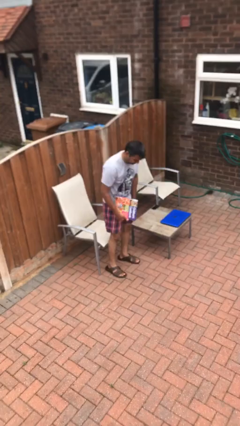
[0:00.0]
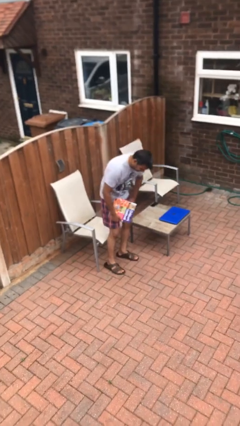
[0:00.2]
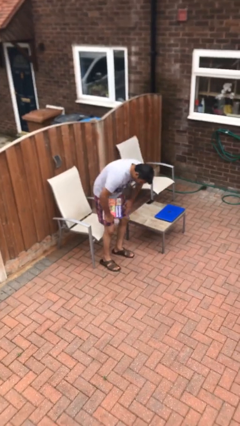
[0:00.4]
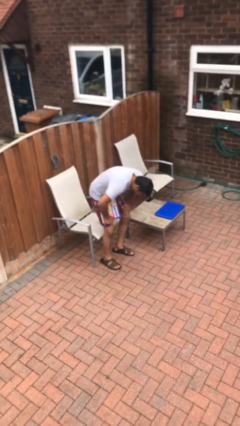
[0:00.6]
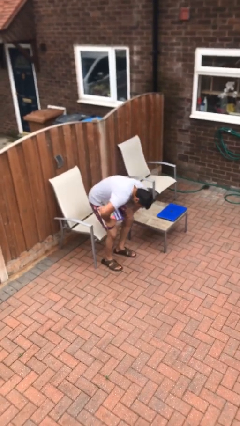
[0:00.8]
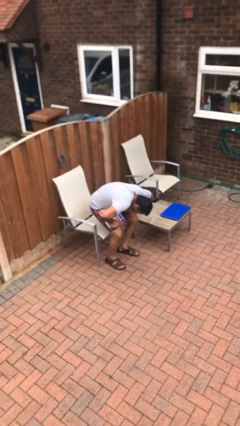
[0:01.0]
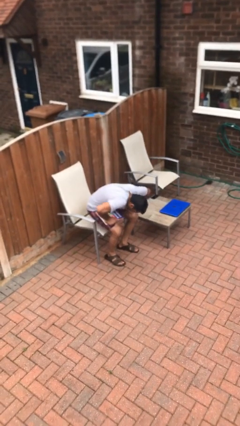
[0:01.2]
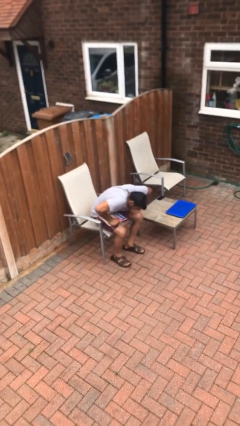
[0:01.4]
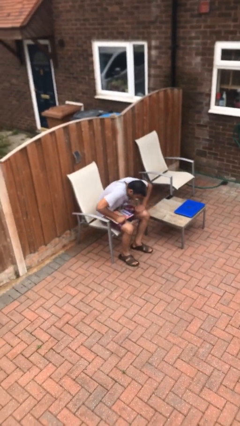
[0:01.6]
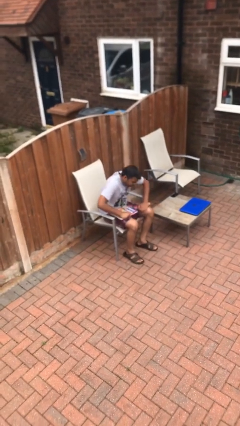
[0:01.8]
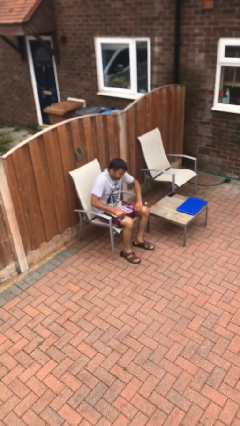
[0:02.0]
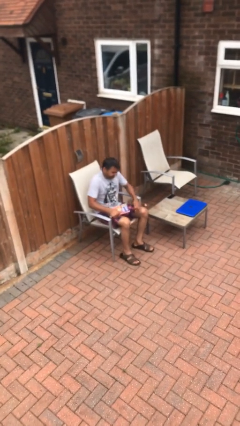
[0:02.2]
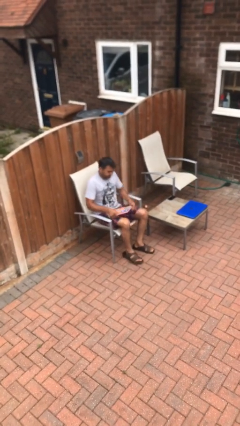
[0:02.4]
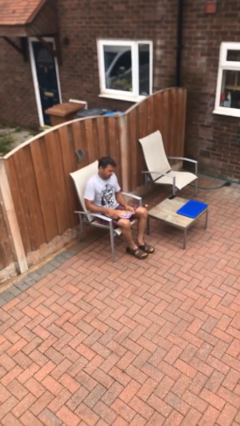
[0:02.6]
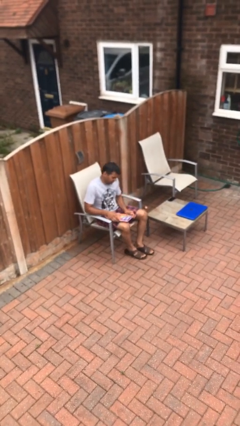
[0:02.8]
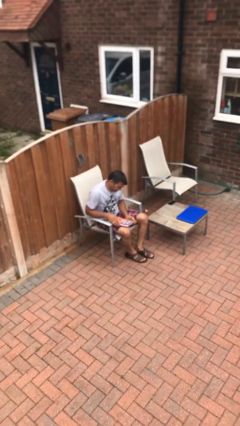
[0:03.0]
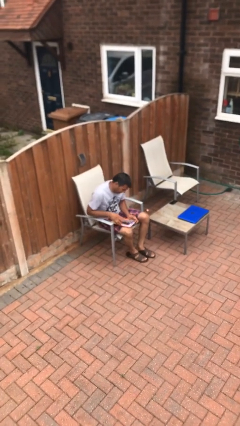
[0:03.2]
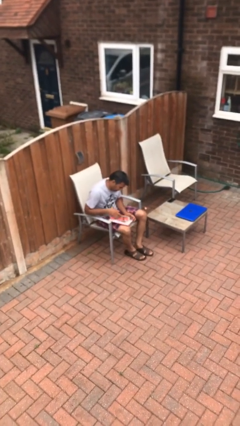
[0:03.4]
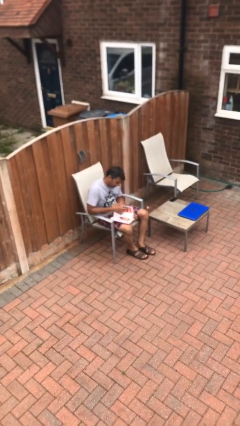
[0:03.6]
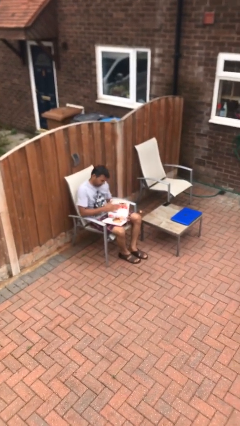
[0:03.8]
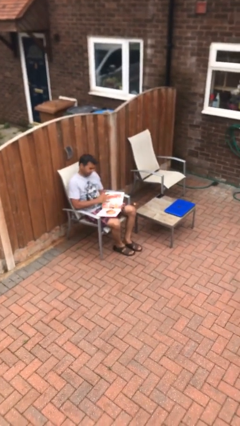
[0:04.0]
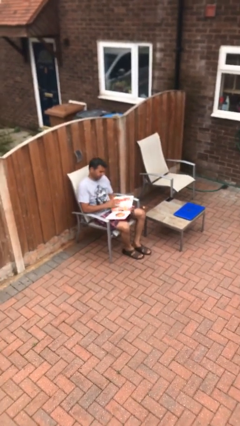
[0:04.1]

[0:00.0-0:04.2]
person sits down

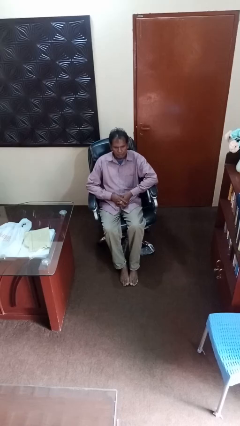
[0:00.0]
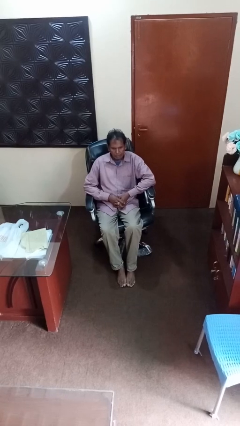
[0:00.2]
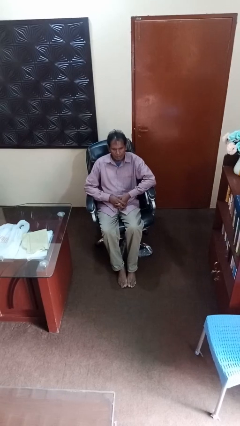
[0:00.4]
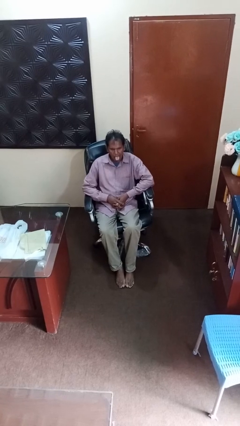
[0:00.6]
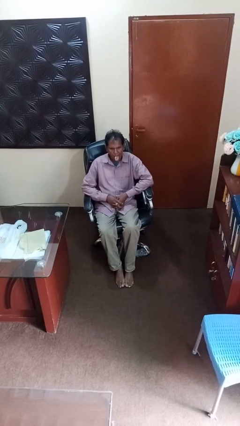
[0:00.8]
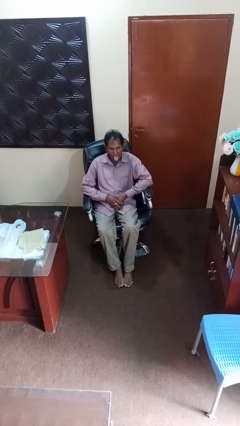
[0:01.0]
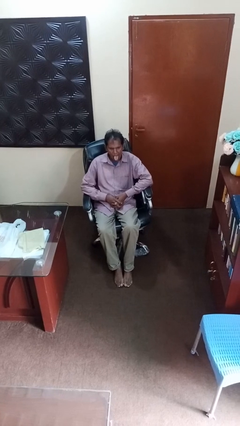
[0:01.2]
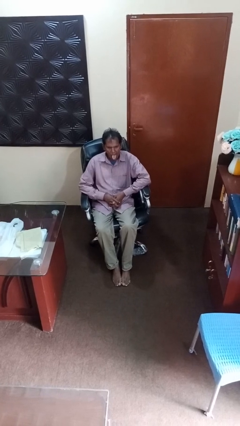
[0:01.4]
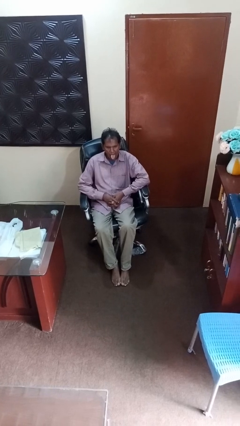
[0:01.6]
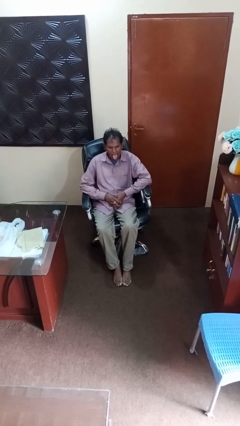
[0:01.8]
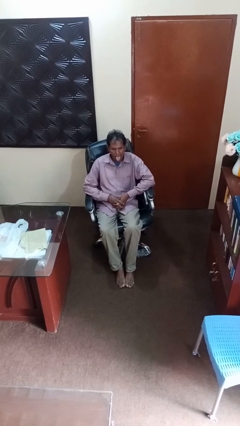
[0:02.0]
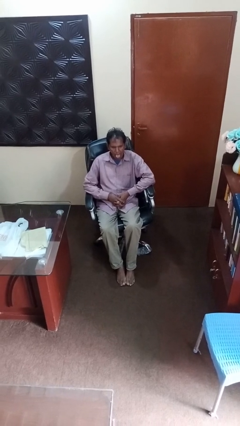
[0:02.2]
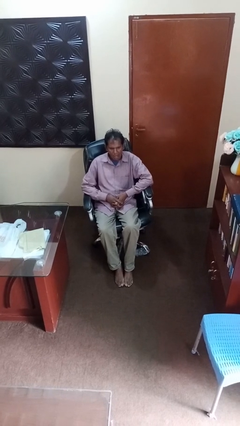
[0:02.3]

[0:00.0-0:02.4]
person sticks out tongue

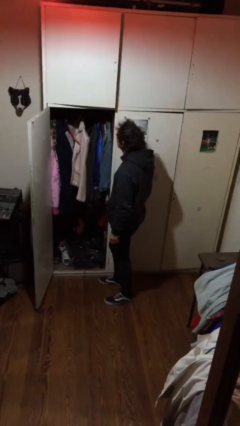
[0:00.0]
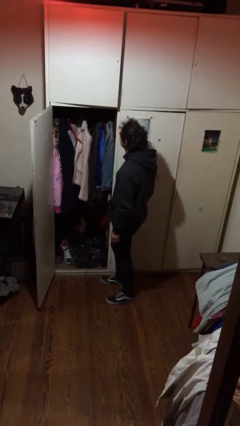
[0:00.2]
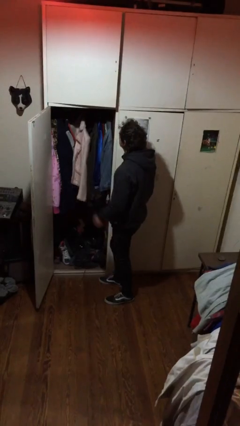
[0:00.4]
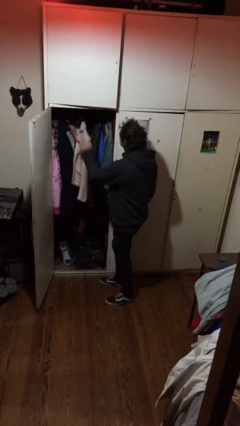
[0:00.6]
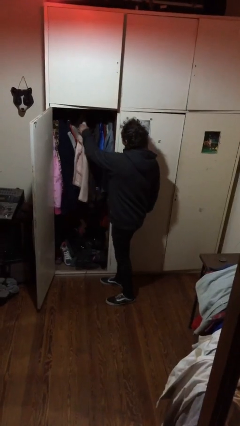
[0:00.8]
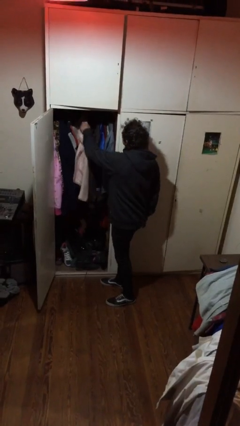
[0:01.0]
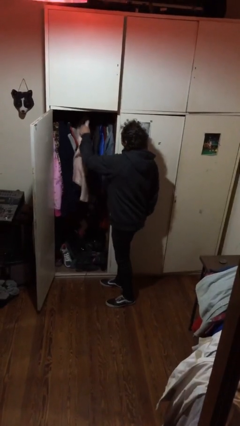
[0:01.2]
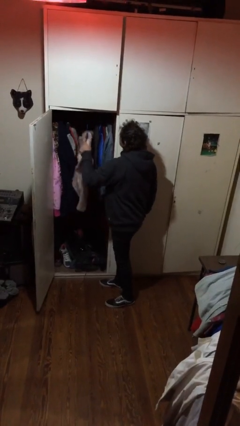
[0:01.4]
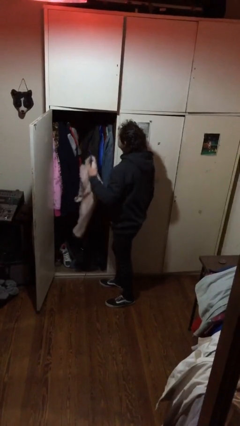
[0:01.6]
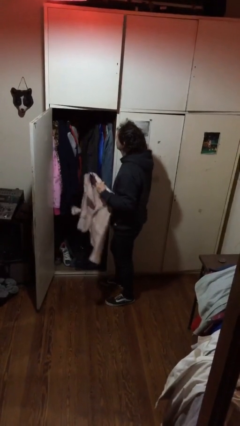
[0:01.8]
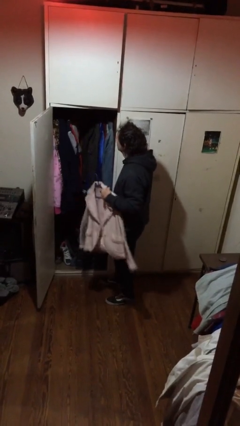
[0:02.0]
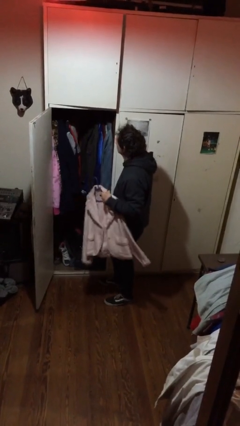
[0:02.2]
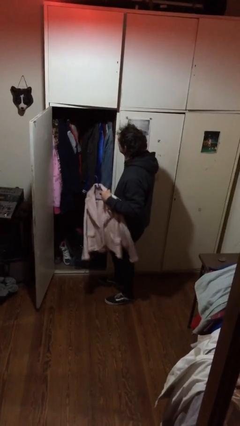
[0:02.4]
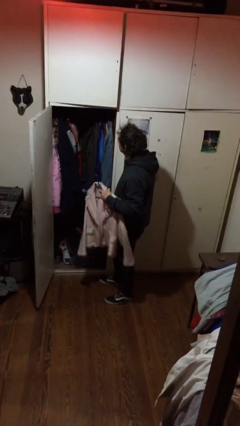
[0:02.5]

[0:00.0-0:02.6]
person takes clothes from closet

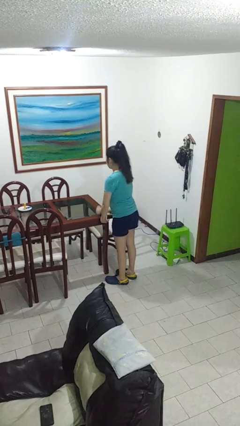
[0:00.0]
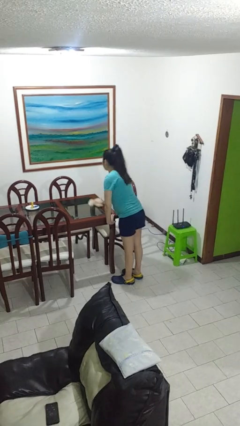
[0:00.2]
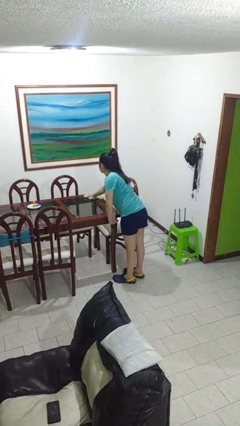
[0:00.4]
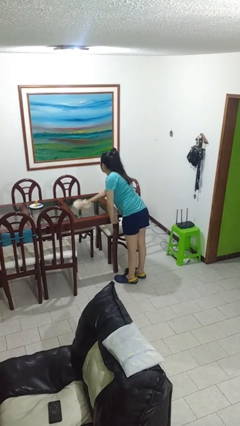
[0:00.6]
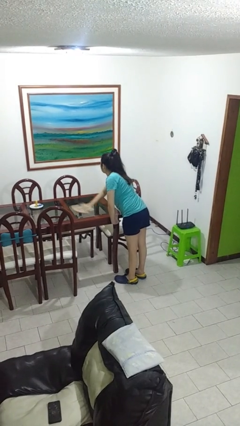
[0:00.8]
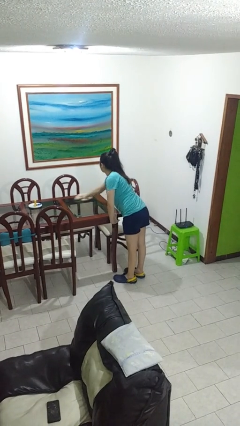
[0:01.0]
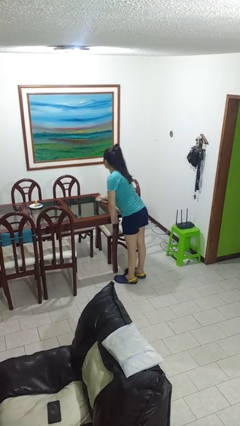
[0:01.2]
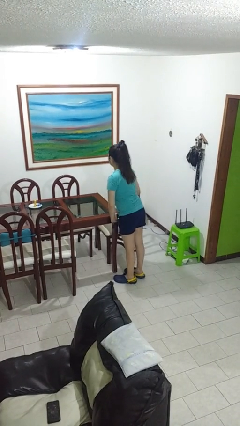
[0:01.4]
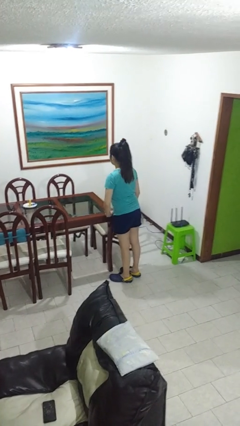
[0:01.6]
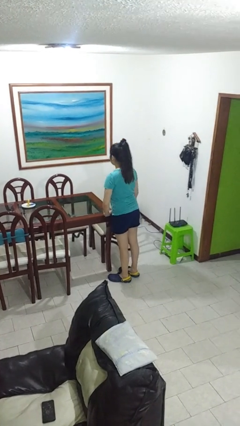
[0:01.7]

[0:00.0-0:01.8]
person cleans table with rag

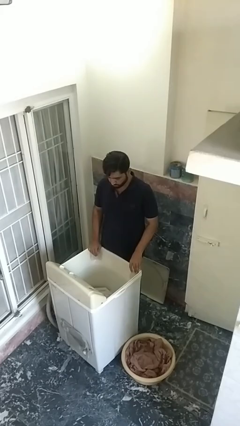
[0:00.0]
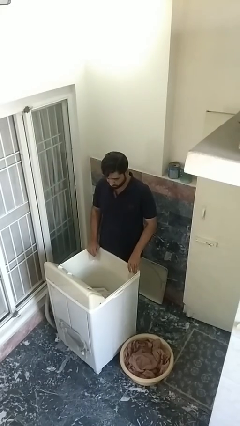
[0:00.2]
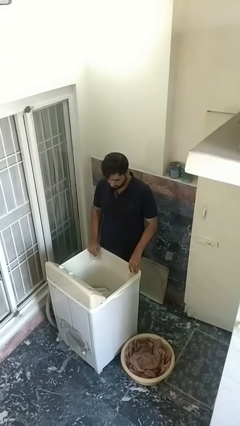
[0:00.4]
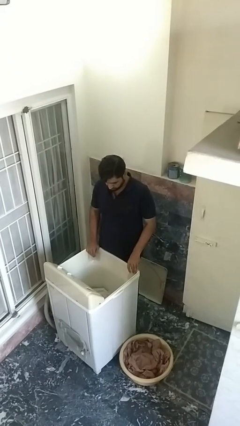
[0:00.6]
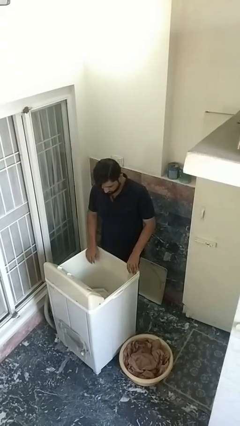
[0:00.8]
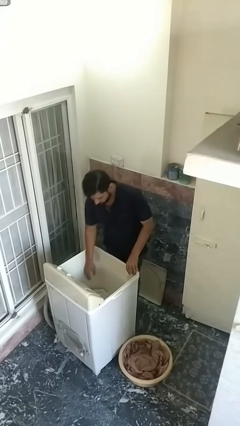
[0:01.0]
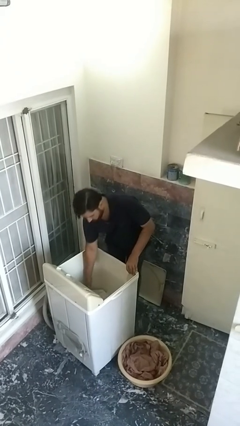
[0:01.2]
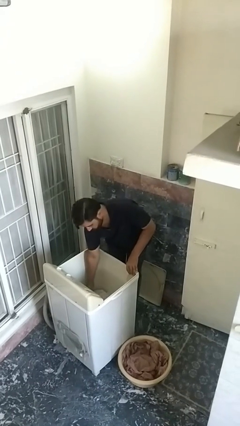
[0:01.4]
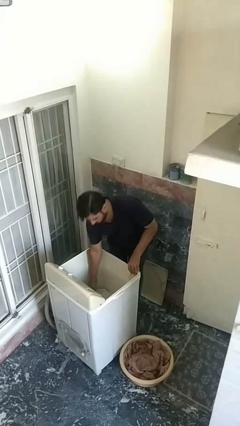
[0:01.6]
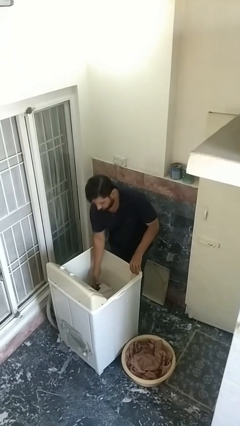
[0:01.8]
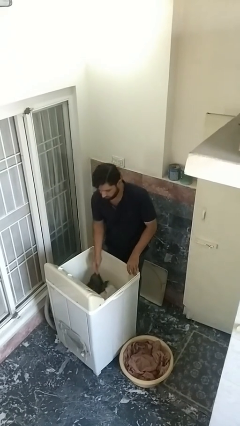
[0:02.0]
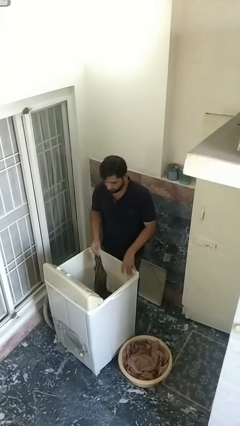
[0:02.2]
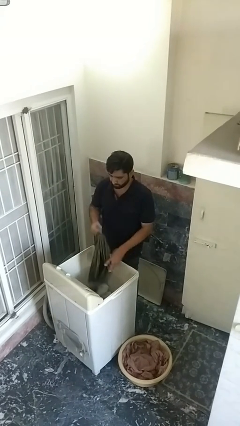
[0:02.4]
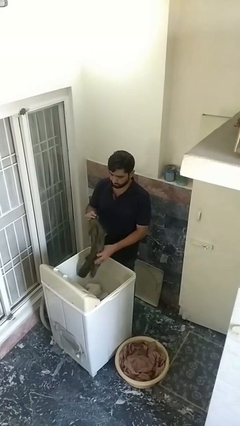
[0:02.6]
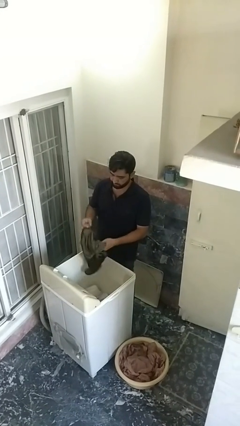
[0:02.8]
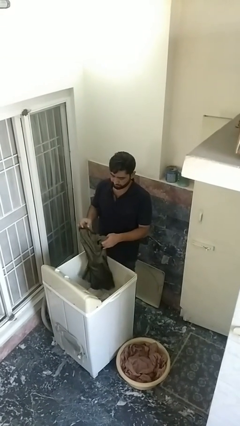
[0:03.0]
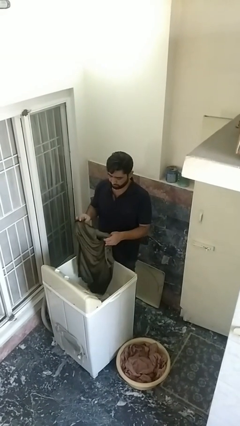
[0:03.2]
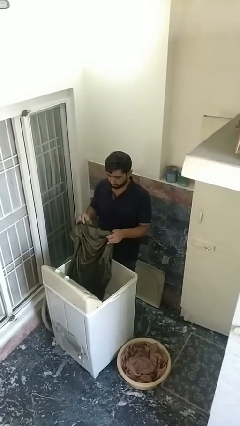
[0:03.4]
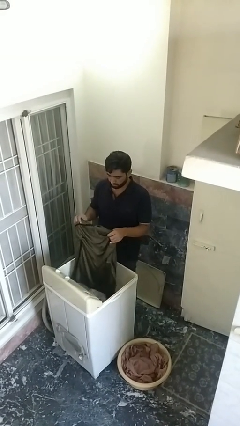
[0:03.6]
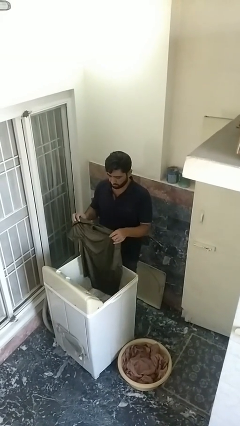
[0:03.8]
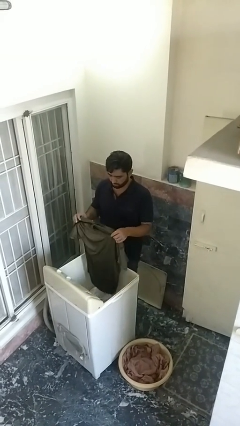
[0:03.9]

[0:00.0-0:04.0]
person unloads clotheswasher

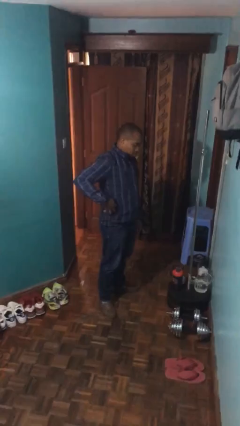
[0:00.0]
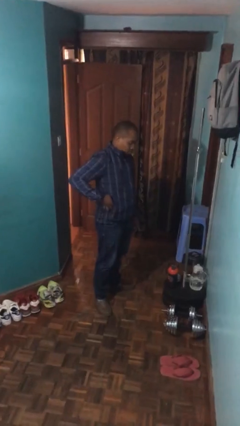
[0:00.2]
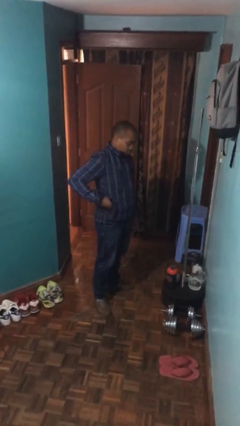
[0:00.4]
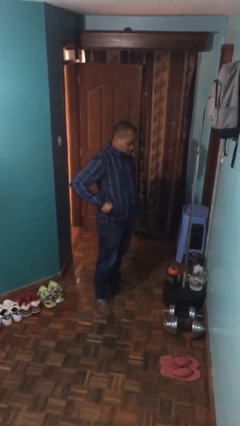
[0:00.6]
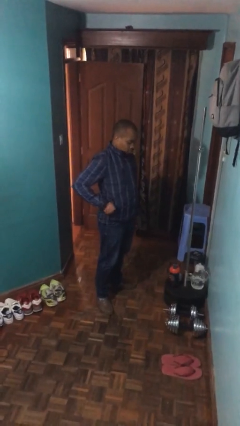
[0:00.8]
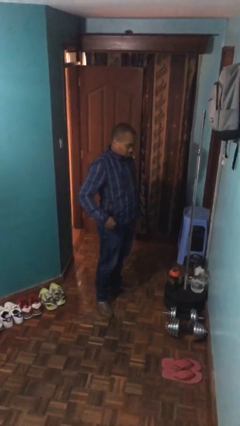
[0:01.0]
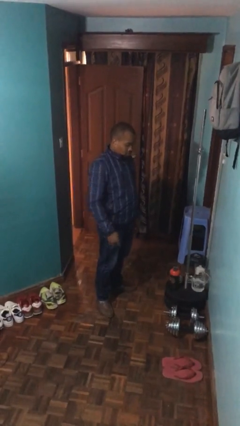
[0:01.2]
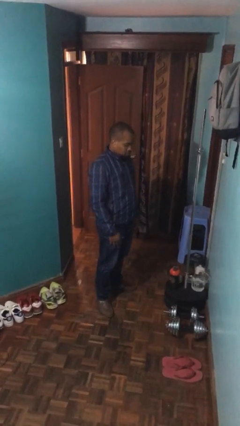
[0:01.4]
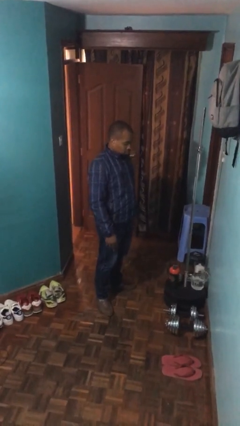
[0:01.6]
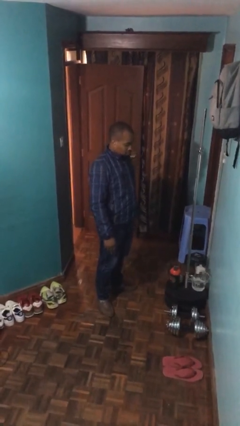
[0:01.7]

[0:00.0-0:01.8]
person puts phone into pocket

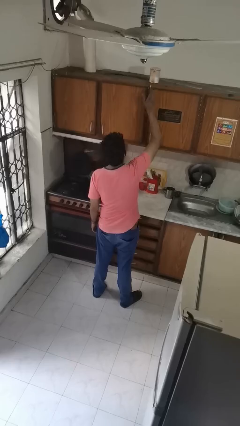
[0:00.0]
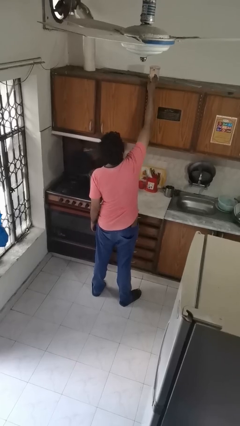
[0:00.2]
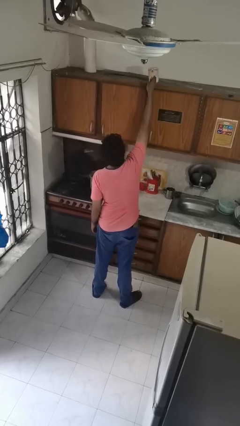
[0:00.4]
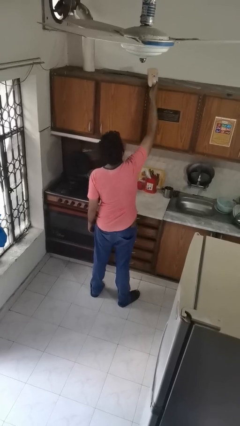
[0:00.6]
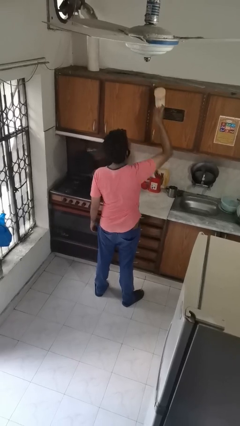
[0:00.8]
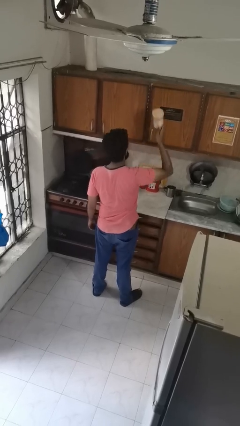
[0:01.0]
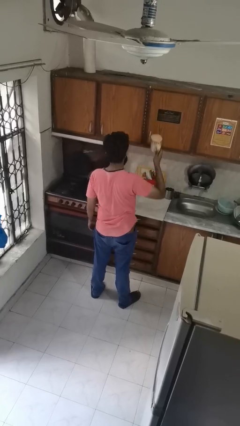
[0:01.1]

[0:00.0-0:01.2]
person picks up object from shelf
